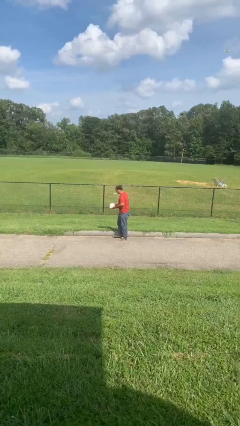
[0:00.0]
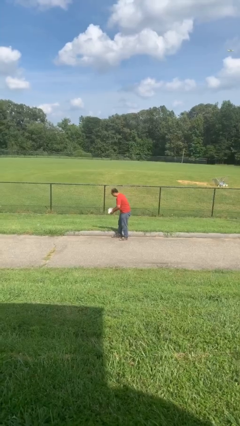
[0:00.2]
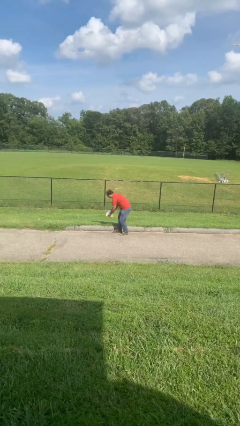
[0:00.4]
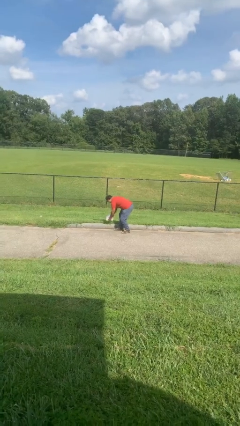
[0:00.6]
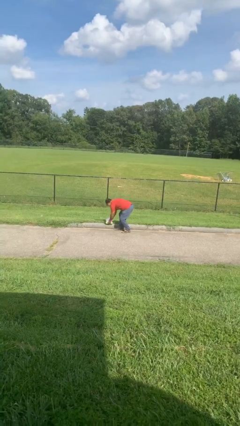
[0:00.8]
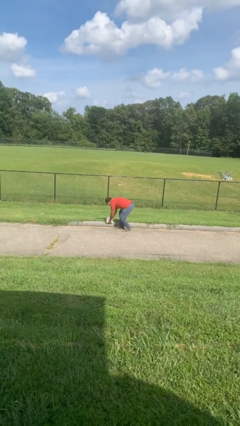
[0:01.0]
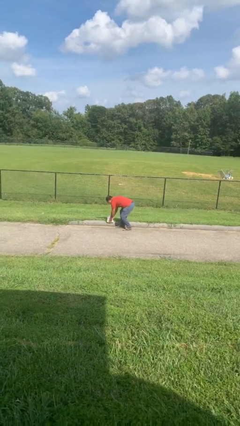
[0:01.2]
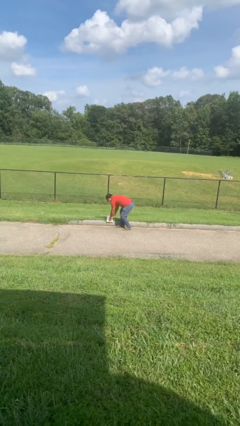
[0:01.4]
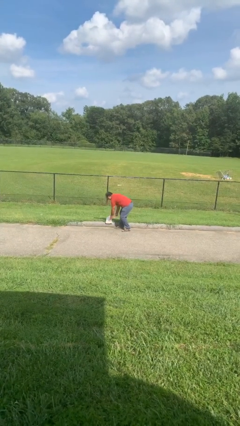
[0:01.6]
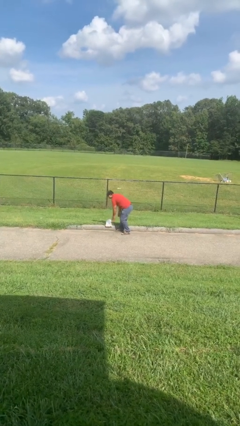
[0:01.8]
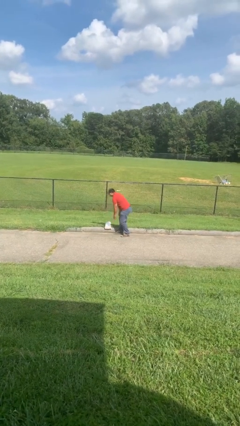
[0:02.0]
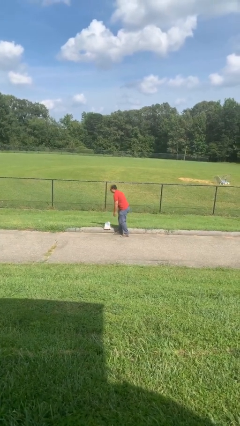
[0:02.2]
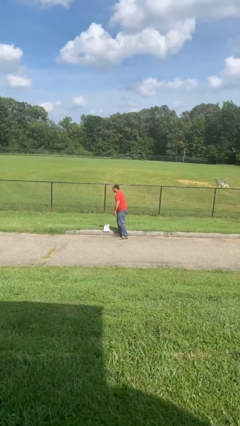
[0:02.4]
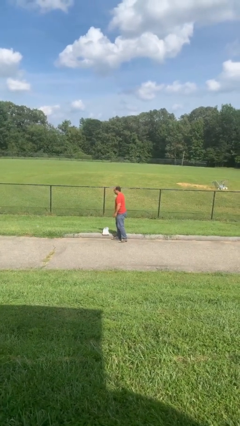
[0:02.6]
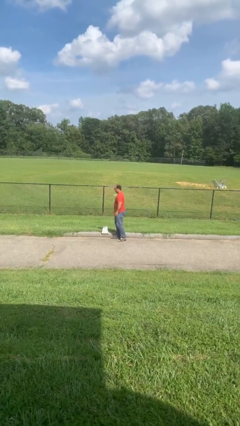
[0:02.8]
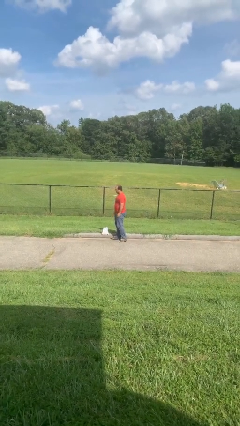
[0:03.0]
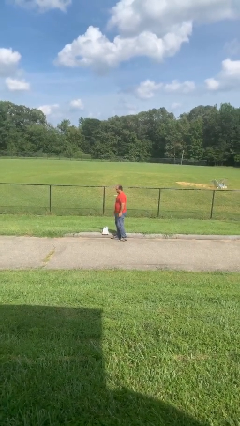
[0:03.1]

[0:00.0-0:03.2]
person puts down object on floor

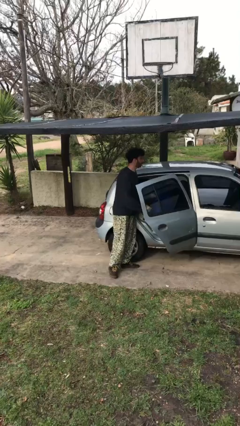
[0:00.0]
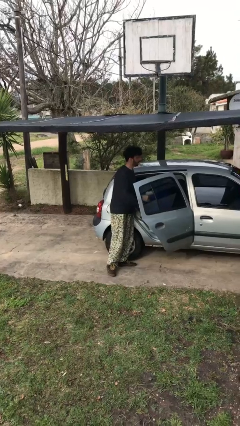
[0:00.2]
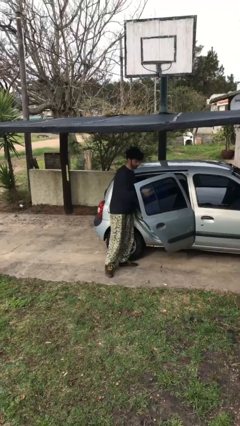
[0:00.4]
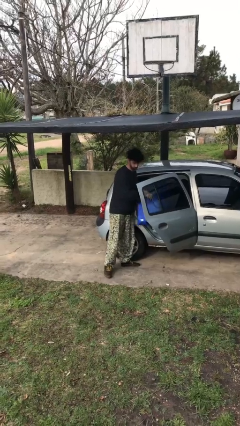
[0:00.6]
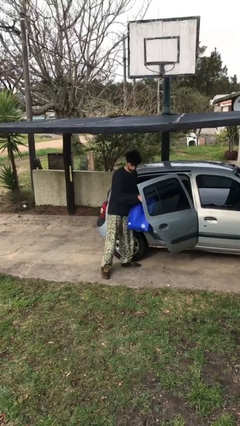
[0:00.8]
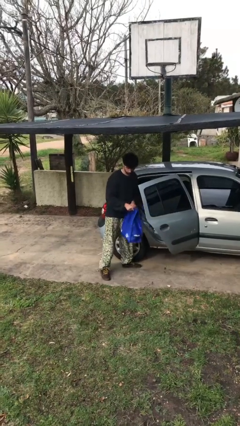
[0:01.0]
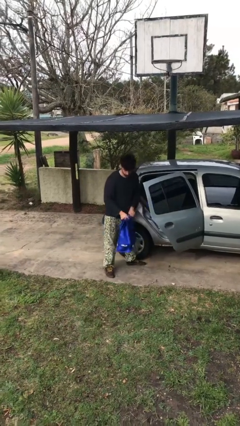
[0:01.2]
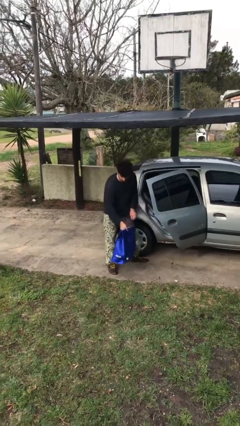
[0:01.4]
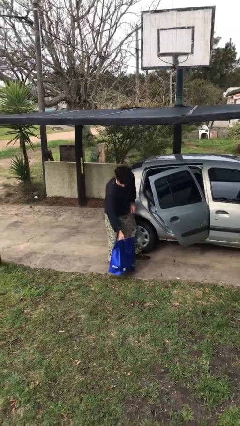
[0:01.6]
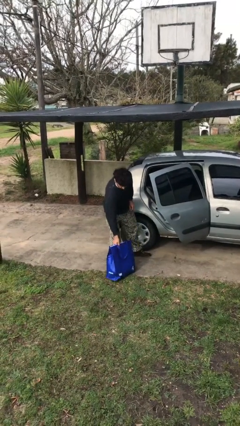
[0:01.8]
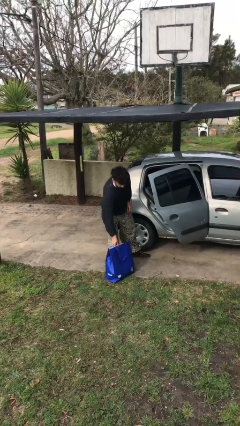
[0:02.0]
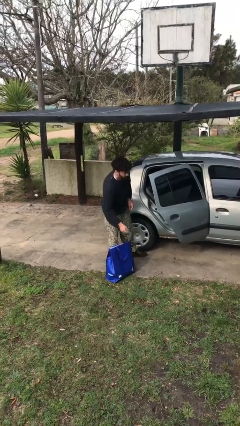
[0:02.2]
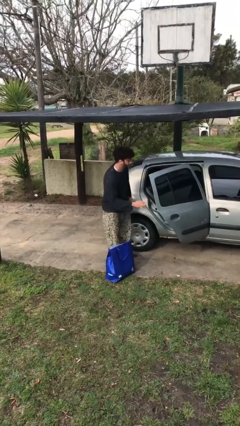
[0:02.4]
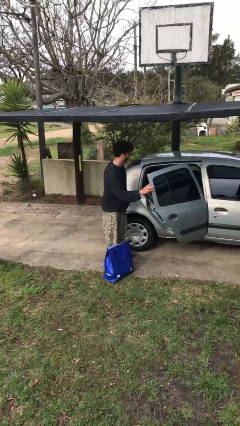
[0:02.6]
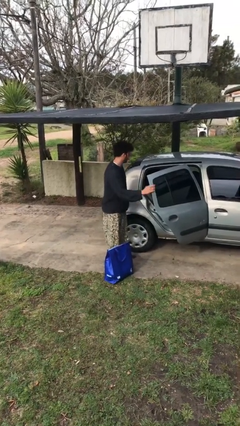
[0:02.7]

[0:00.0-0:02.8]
person unloads car

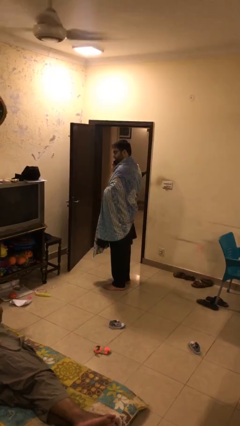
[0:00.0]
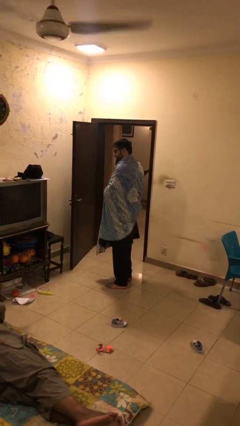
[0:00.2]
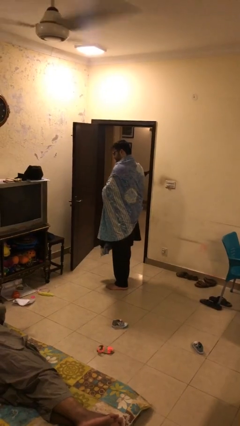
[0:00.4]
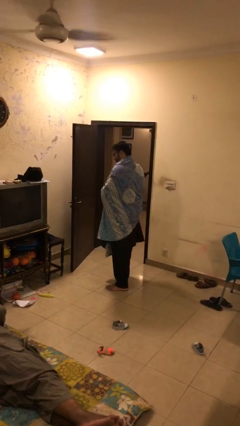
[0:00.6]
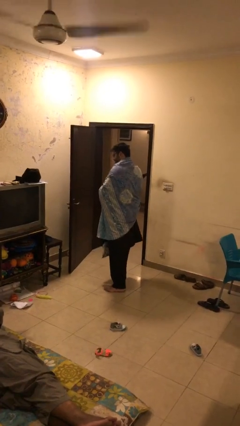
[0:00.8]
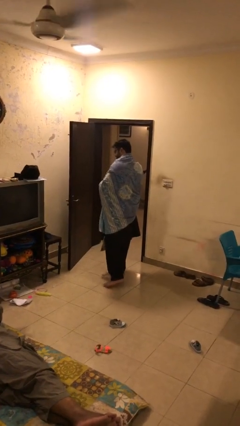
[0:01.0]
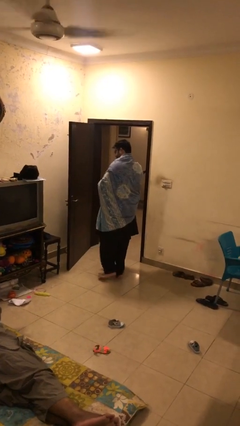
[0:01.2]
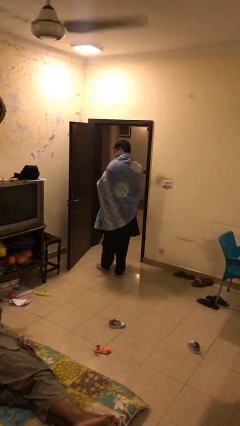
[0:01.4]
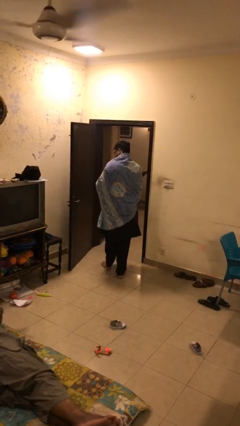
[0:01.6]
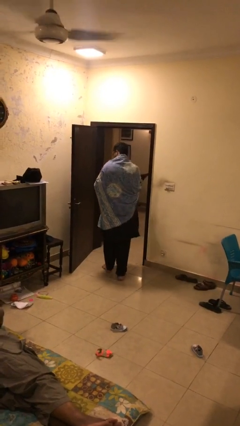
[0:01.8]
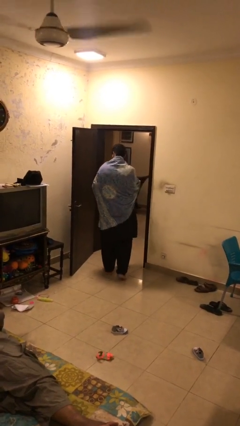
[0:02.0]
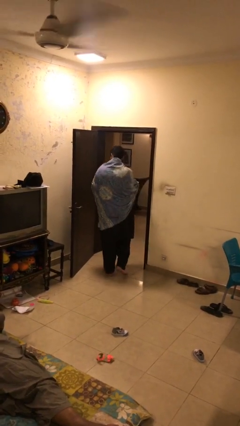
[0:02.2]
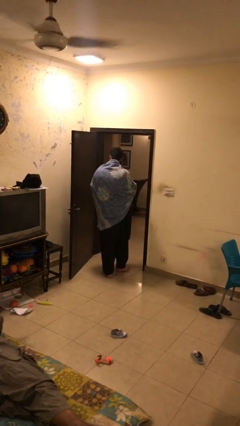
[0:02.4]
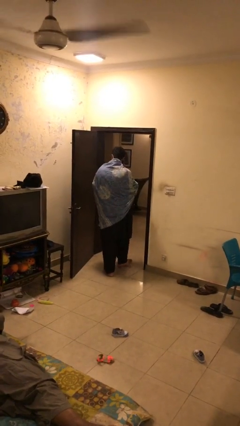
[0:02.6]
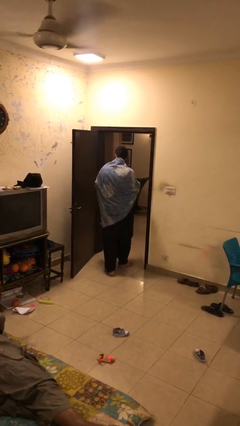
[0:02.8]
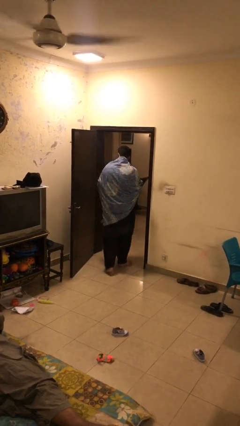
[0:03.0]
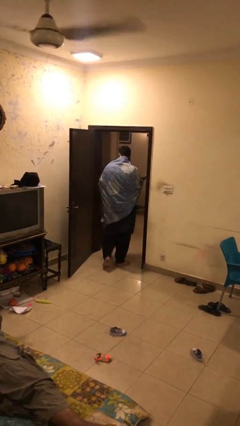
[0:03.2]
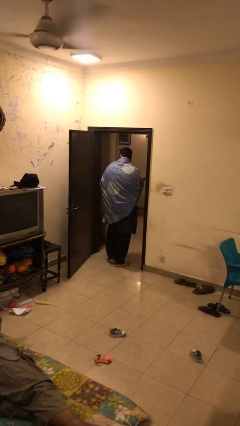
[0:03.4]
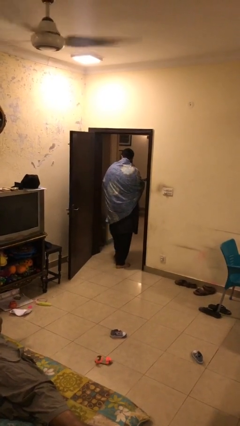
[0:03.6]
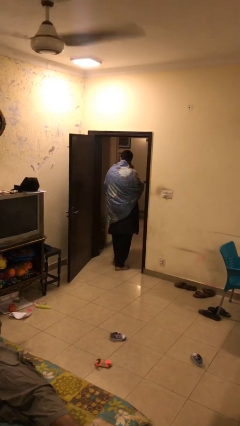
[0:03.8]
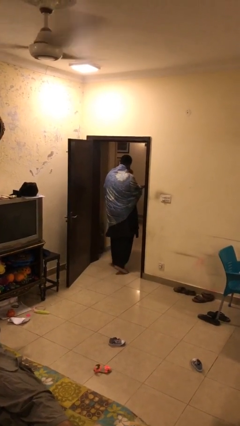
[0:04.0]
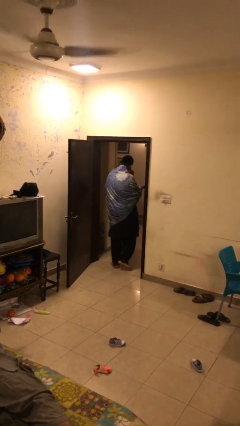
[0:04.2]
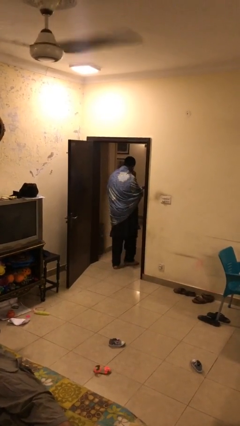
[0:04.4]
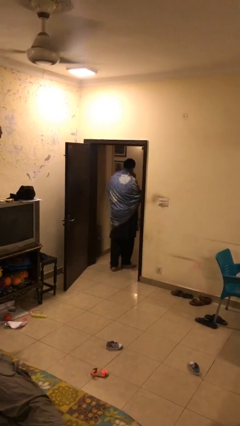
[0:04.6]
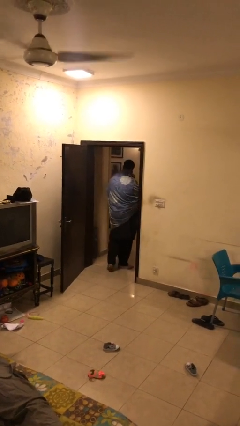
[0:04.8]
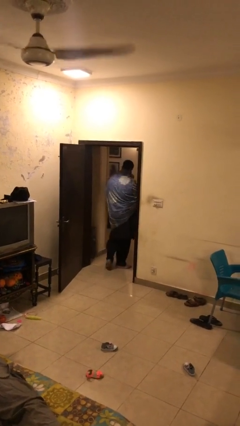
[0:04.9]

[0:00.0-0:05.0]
person exits scene through structure

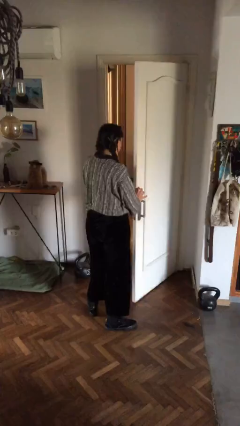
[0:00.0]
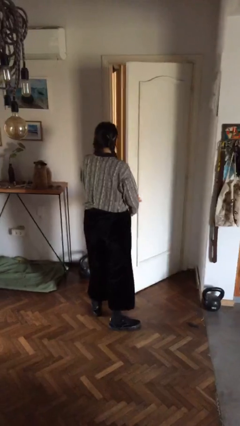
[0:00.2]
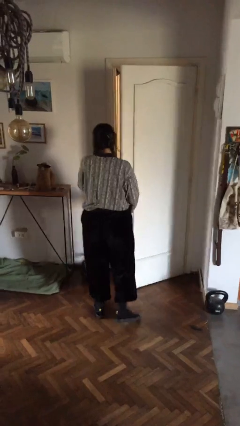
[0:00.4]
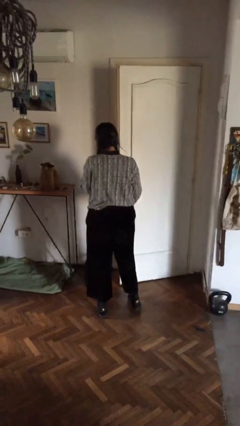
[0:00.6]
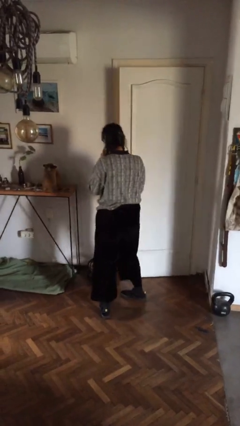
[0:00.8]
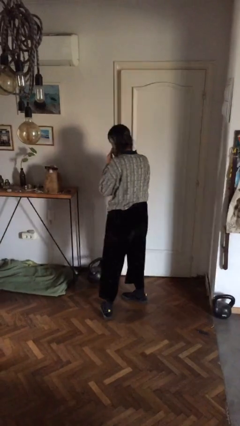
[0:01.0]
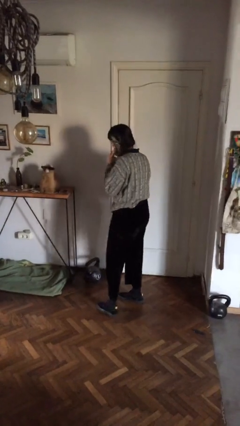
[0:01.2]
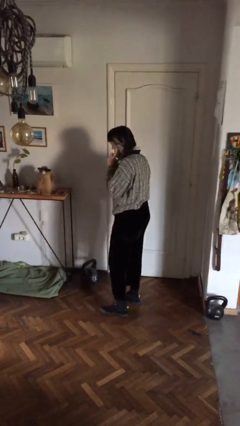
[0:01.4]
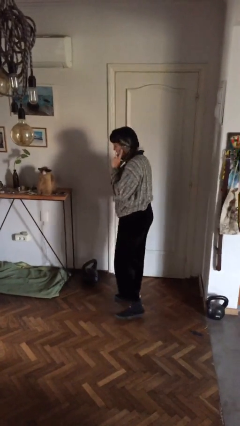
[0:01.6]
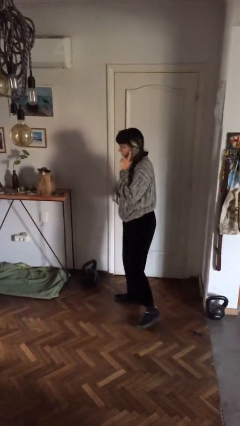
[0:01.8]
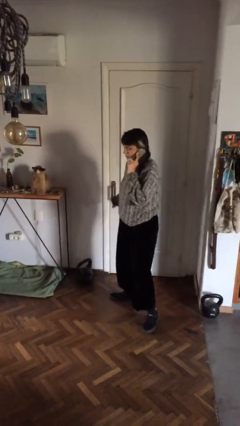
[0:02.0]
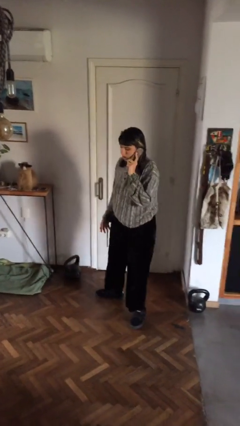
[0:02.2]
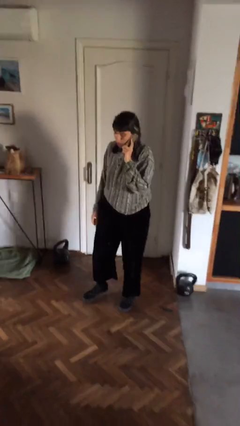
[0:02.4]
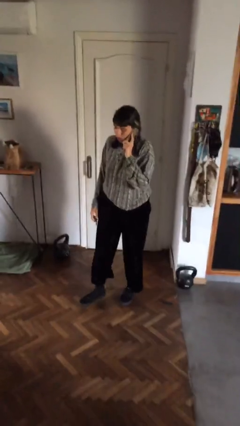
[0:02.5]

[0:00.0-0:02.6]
person closes facility door

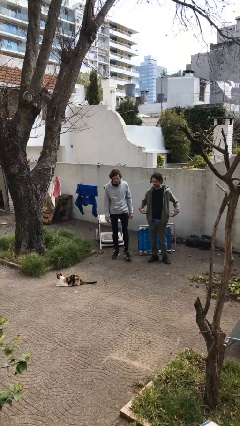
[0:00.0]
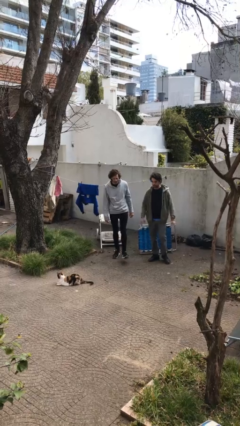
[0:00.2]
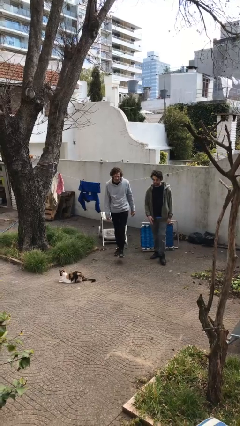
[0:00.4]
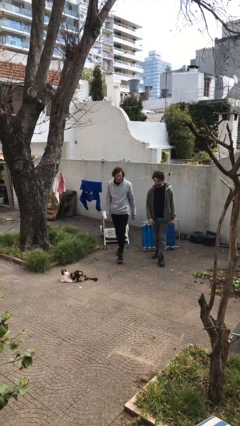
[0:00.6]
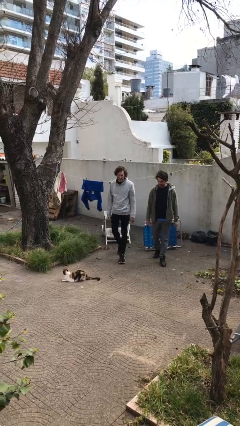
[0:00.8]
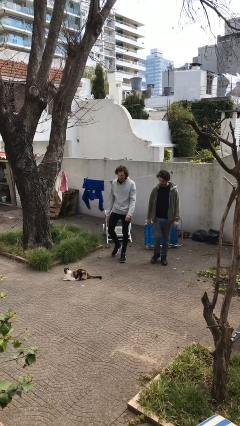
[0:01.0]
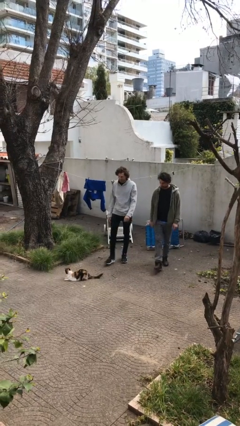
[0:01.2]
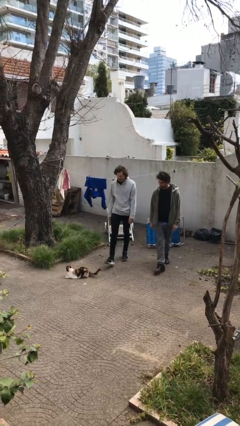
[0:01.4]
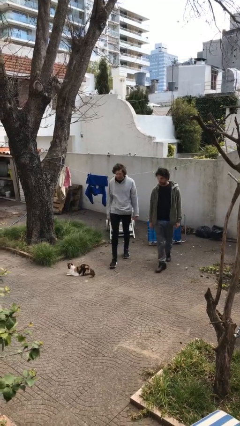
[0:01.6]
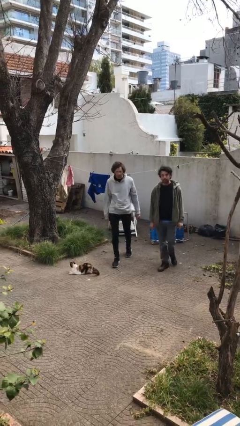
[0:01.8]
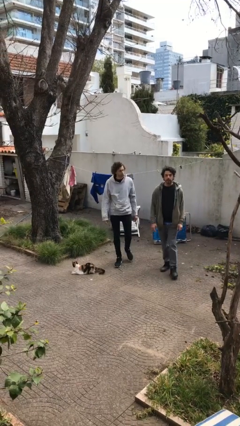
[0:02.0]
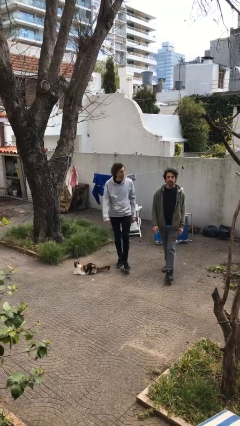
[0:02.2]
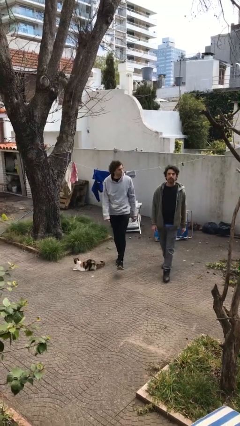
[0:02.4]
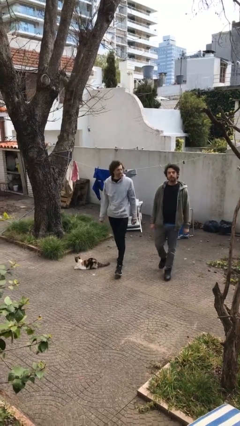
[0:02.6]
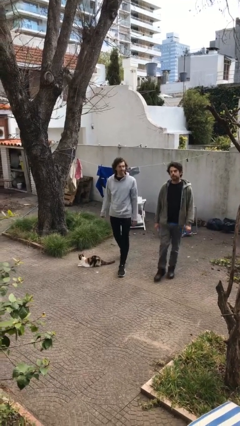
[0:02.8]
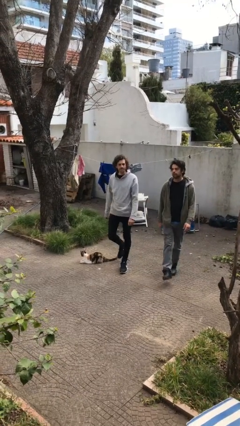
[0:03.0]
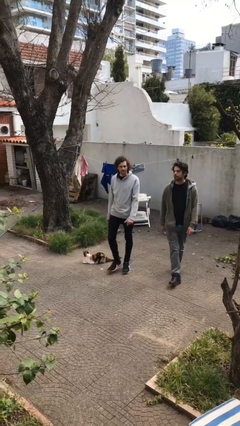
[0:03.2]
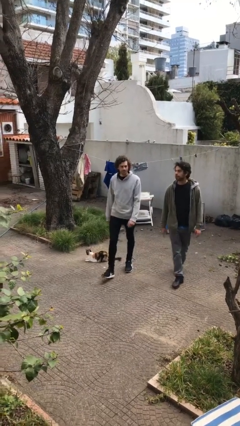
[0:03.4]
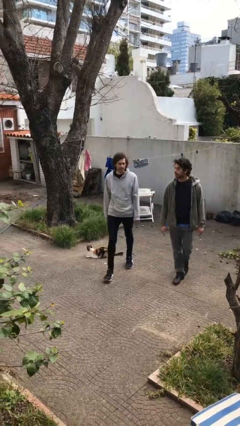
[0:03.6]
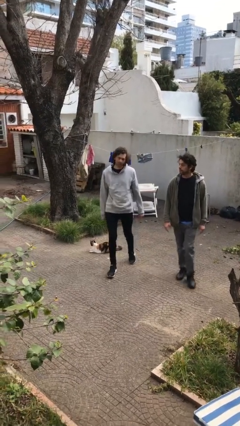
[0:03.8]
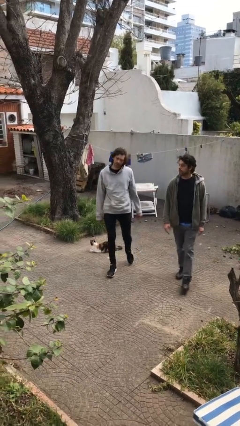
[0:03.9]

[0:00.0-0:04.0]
person talks to person
